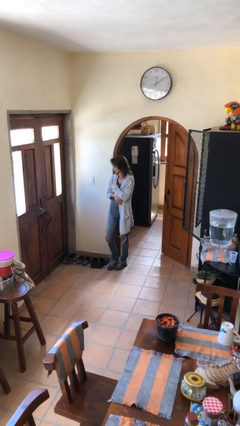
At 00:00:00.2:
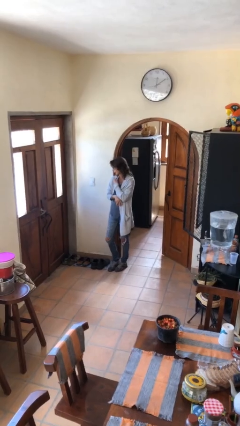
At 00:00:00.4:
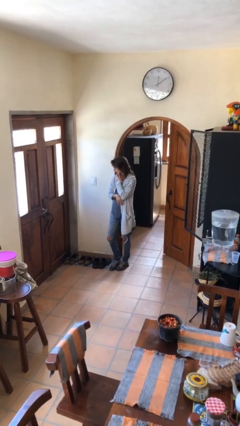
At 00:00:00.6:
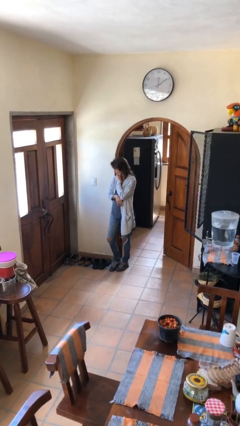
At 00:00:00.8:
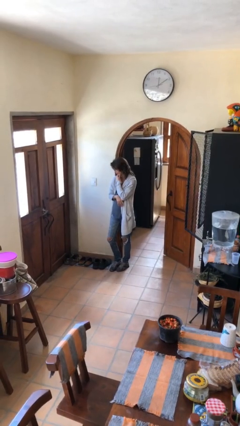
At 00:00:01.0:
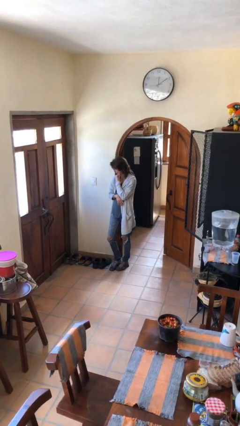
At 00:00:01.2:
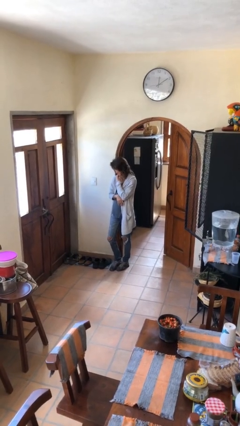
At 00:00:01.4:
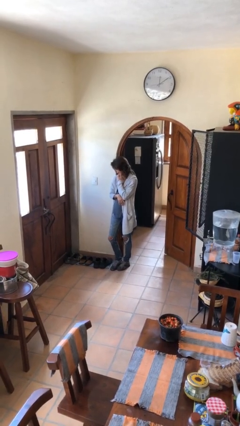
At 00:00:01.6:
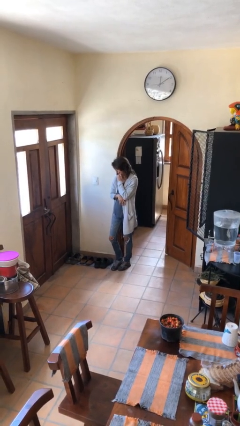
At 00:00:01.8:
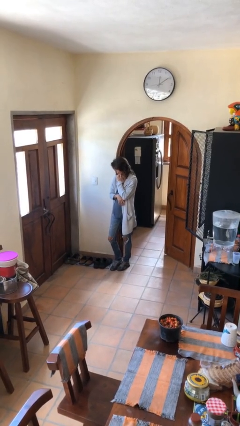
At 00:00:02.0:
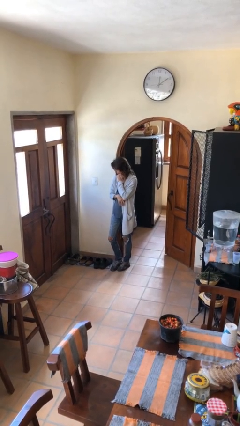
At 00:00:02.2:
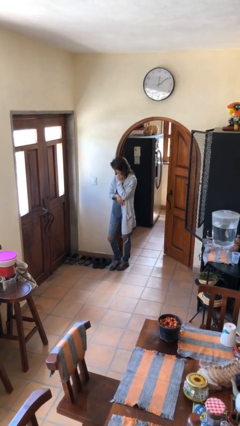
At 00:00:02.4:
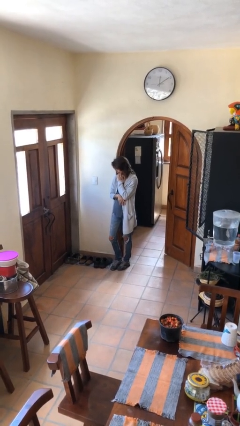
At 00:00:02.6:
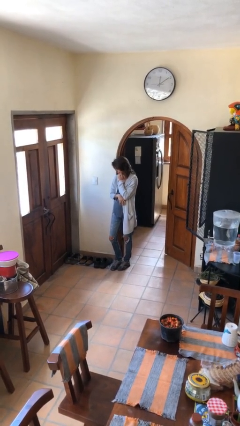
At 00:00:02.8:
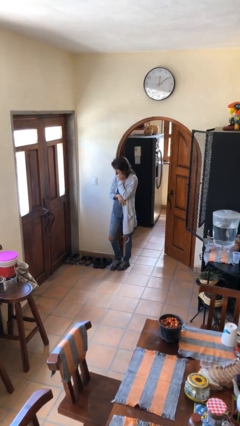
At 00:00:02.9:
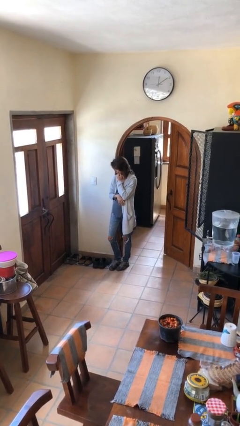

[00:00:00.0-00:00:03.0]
person strokes chin

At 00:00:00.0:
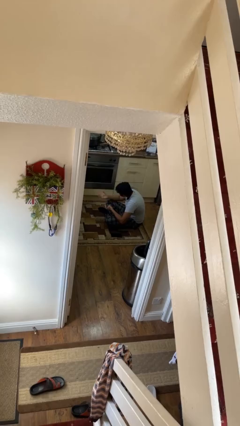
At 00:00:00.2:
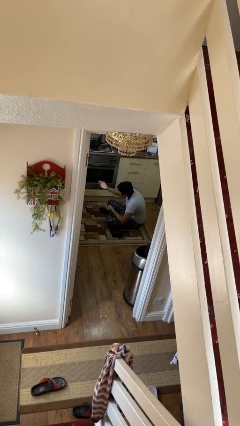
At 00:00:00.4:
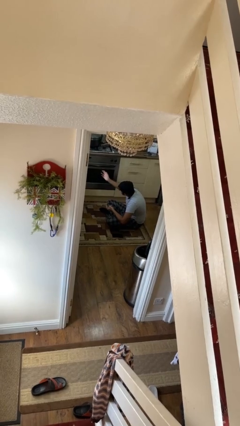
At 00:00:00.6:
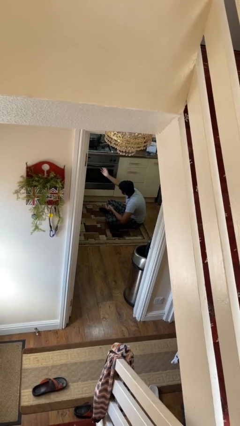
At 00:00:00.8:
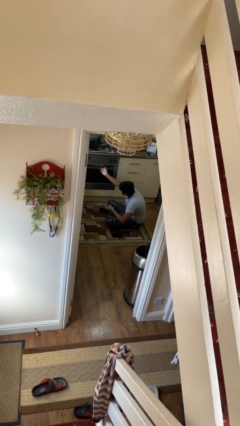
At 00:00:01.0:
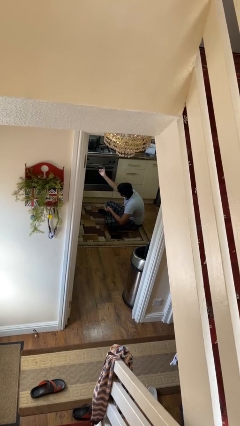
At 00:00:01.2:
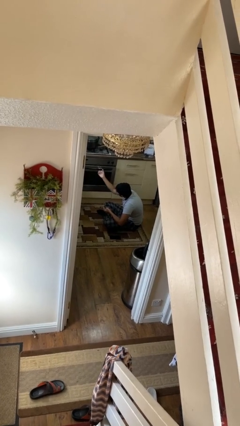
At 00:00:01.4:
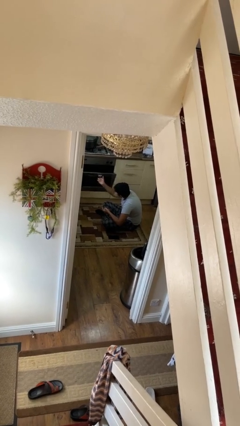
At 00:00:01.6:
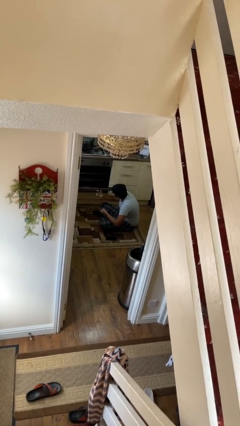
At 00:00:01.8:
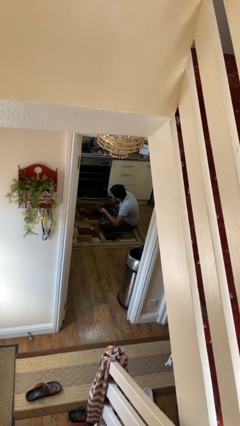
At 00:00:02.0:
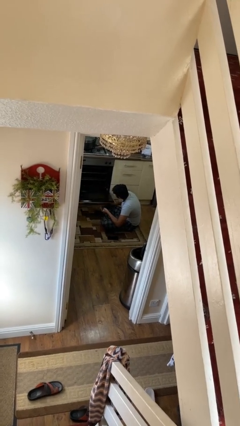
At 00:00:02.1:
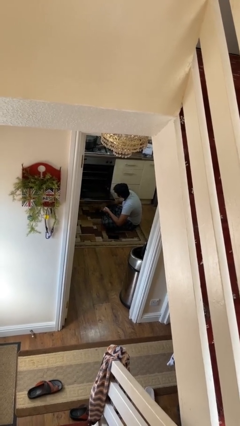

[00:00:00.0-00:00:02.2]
person opens oven door

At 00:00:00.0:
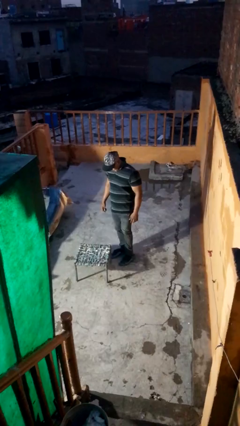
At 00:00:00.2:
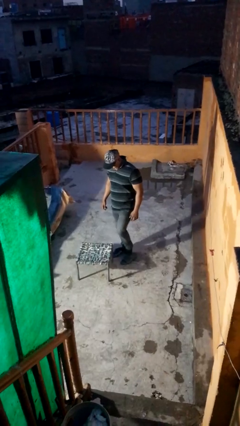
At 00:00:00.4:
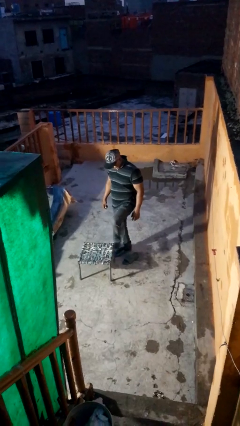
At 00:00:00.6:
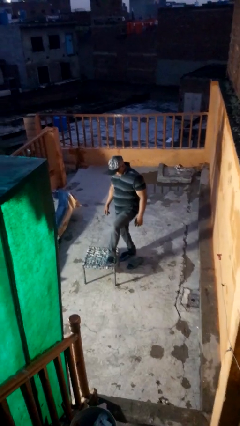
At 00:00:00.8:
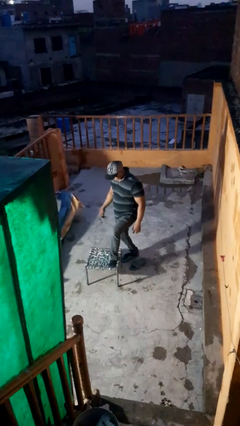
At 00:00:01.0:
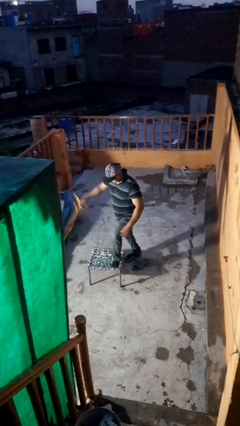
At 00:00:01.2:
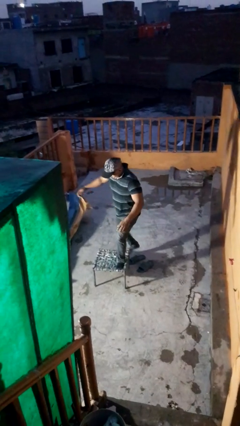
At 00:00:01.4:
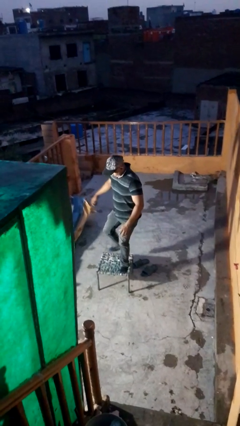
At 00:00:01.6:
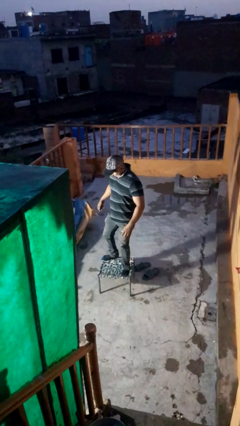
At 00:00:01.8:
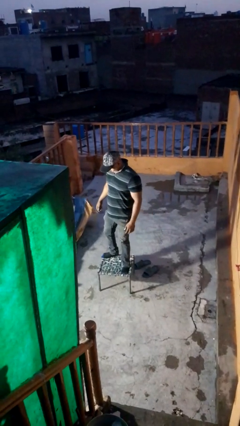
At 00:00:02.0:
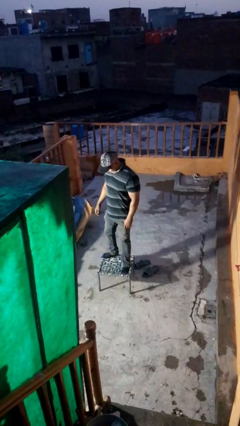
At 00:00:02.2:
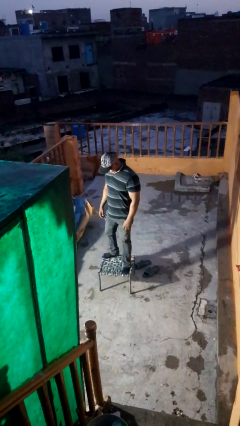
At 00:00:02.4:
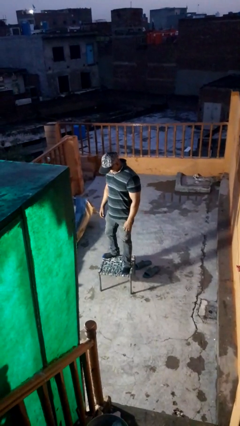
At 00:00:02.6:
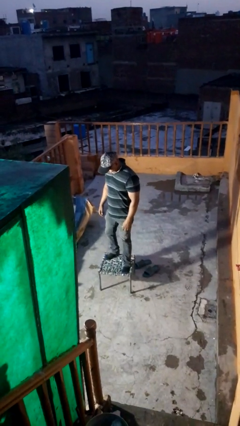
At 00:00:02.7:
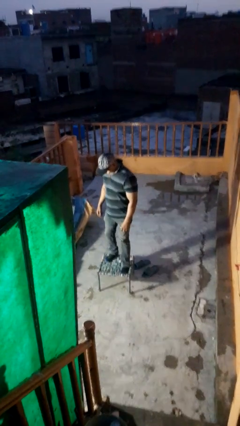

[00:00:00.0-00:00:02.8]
person climbs on table

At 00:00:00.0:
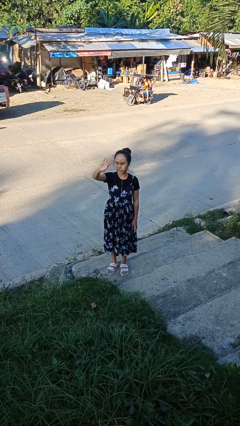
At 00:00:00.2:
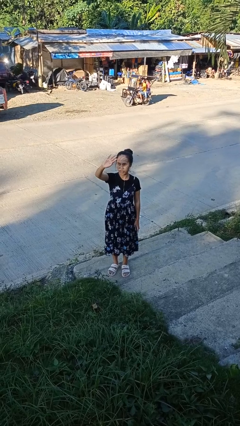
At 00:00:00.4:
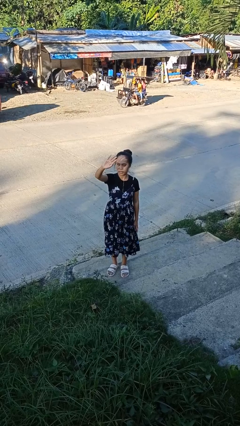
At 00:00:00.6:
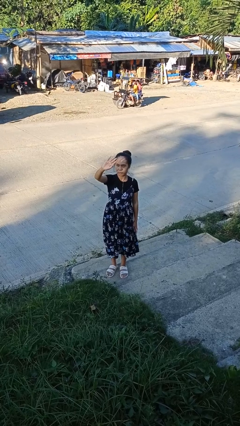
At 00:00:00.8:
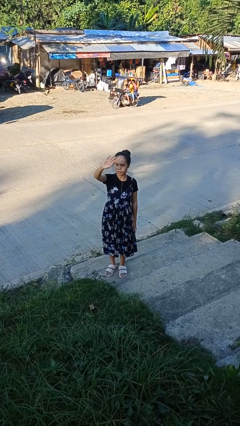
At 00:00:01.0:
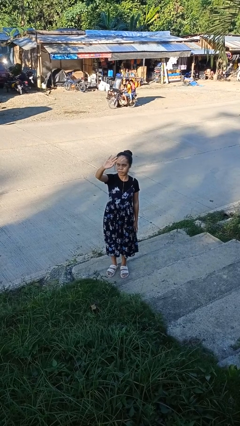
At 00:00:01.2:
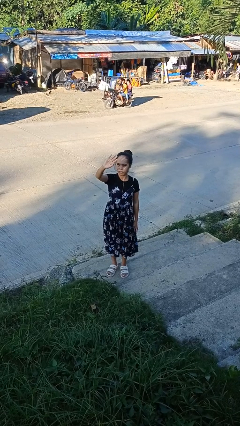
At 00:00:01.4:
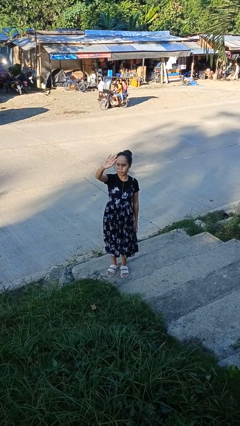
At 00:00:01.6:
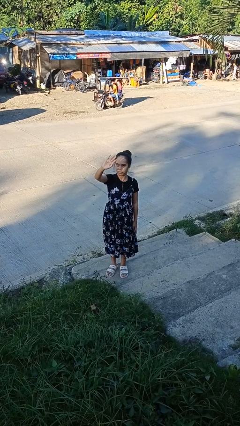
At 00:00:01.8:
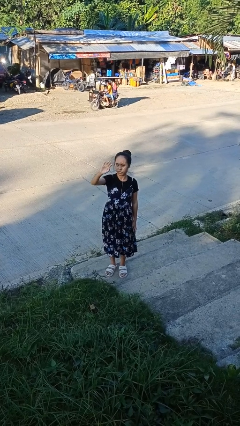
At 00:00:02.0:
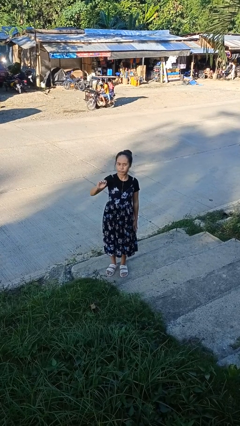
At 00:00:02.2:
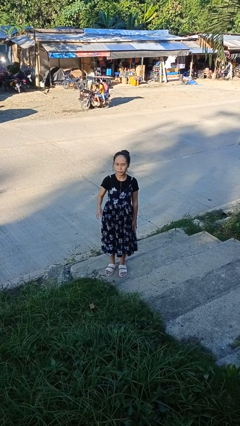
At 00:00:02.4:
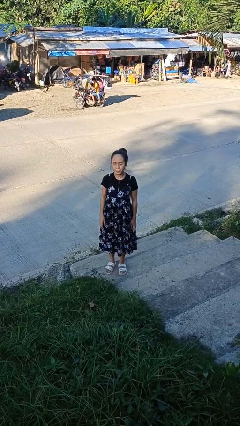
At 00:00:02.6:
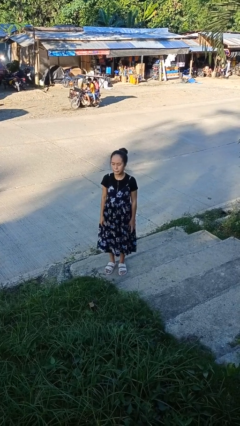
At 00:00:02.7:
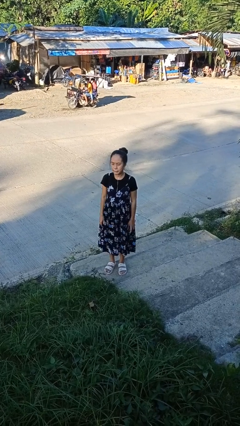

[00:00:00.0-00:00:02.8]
person shades eyes

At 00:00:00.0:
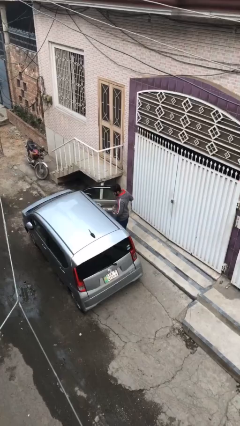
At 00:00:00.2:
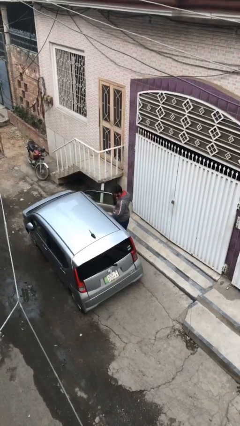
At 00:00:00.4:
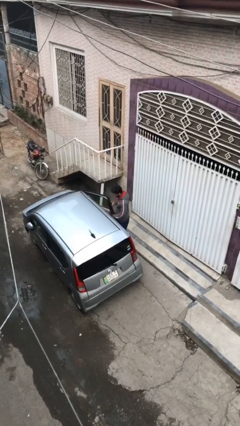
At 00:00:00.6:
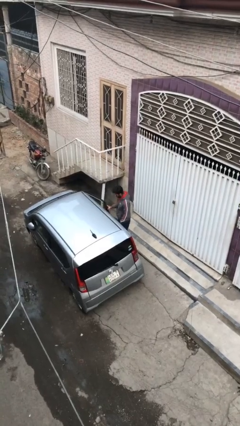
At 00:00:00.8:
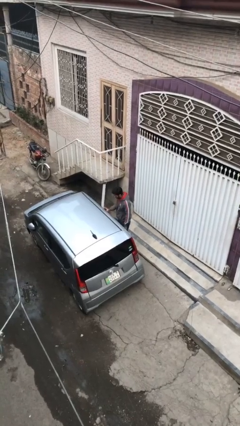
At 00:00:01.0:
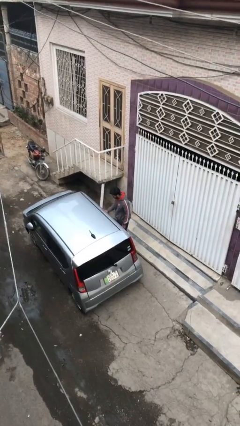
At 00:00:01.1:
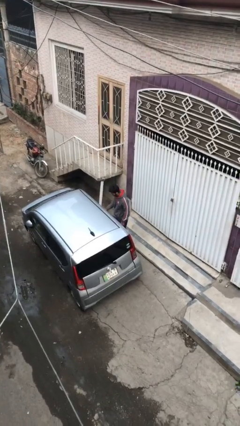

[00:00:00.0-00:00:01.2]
person closes car door

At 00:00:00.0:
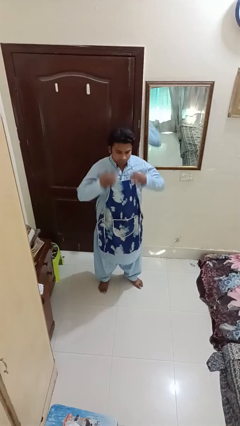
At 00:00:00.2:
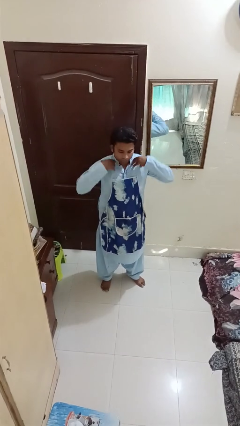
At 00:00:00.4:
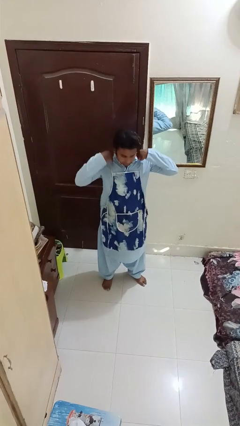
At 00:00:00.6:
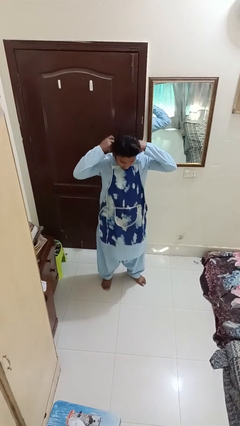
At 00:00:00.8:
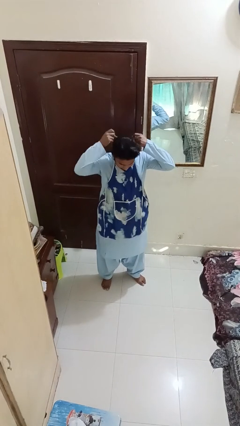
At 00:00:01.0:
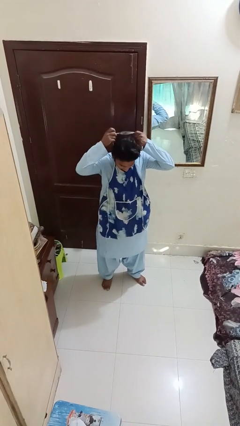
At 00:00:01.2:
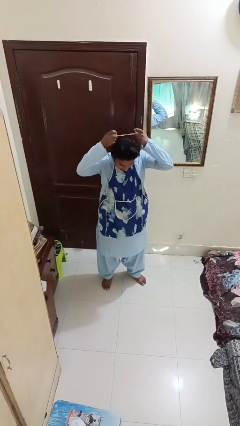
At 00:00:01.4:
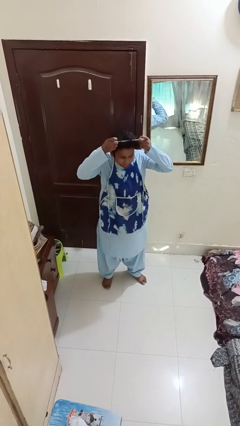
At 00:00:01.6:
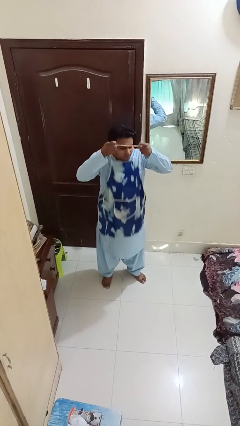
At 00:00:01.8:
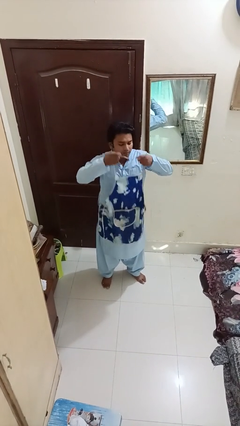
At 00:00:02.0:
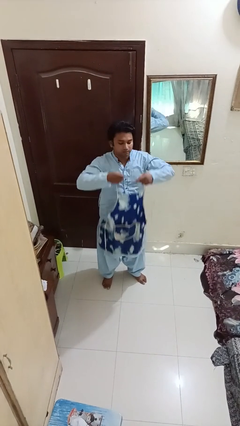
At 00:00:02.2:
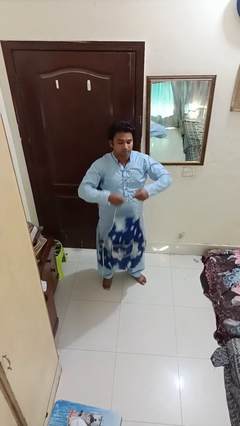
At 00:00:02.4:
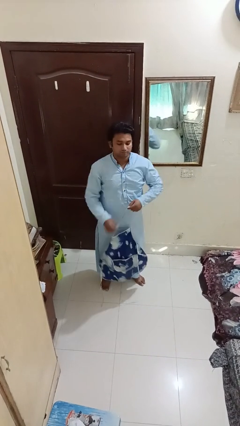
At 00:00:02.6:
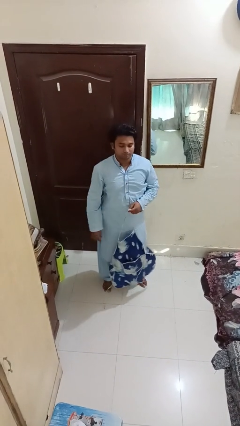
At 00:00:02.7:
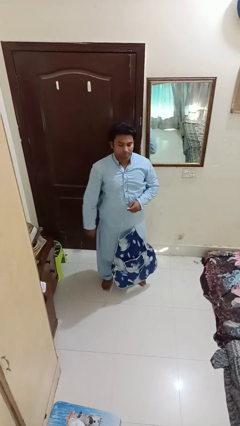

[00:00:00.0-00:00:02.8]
person takes off apron

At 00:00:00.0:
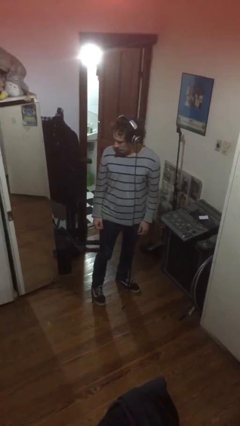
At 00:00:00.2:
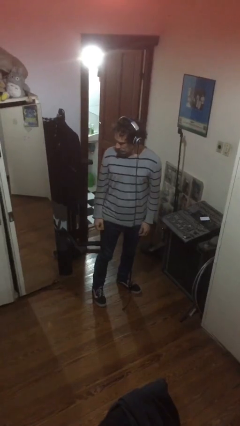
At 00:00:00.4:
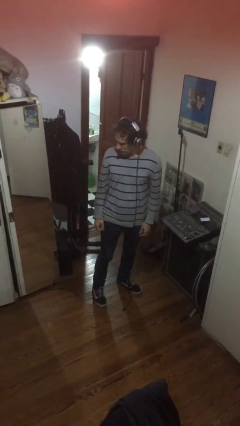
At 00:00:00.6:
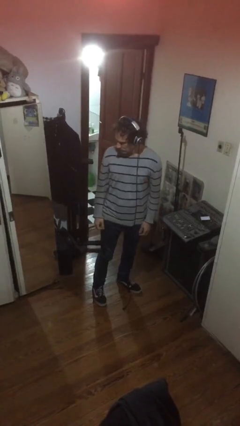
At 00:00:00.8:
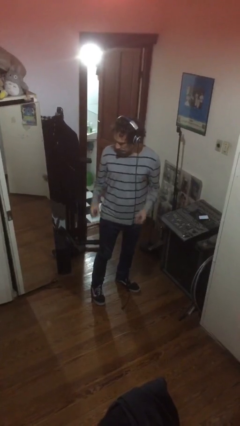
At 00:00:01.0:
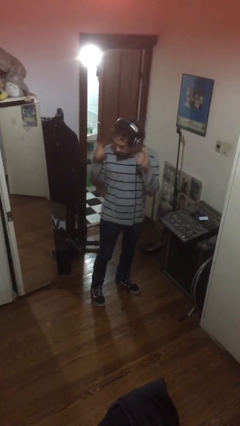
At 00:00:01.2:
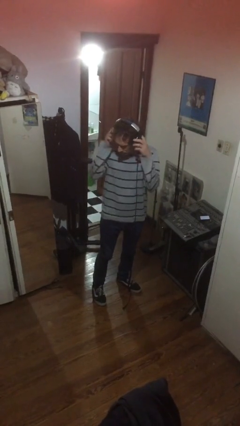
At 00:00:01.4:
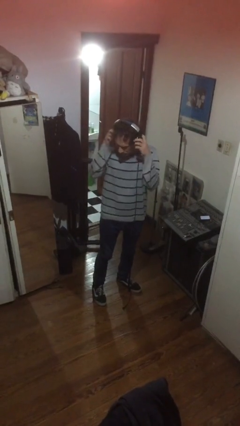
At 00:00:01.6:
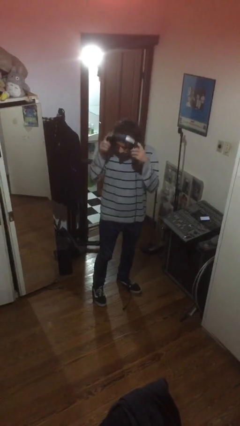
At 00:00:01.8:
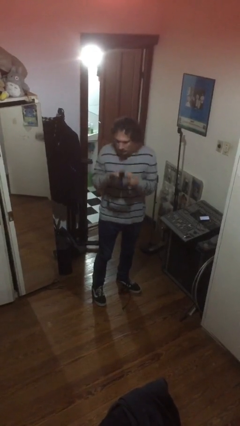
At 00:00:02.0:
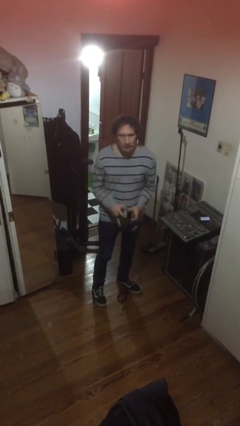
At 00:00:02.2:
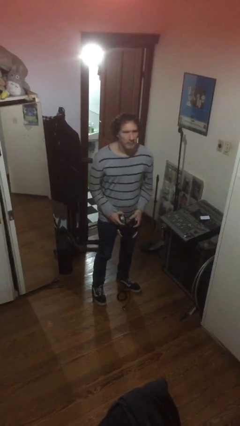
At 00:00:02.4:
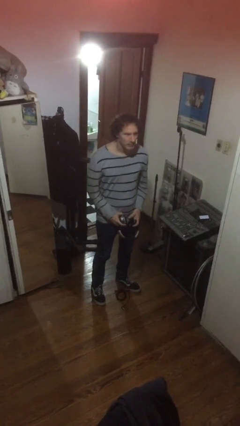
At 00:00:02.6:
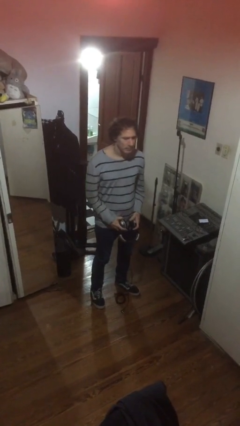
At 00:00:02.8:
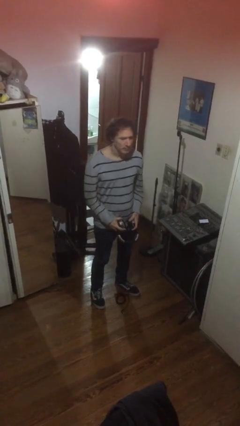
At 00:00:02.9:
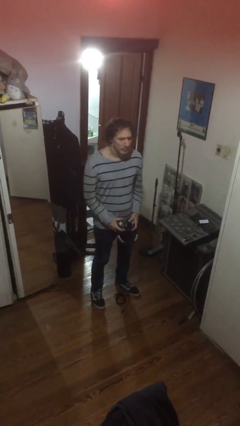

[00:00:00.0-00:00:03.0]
person takes off headphones
